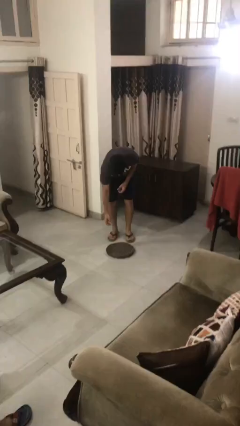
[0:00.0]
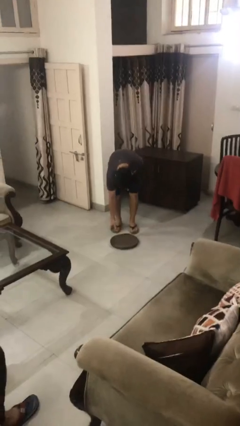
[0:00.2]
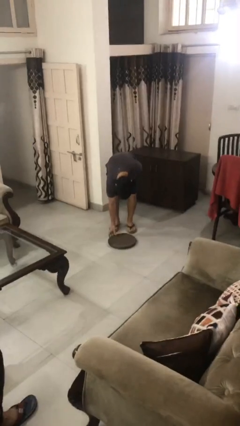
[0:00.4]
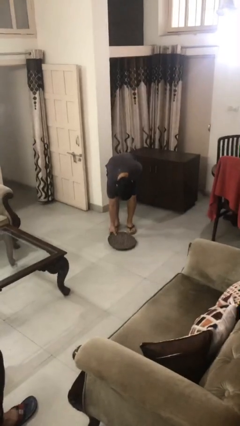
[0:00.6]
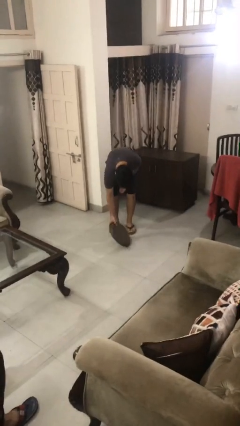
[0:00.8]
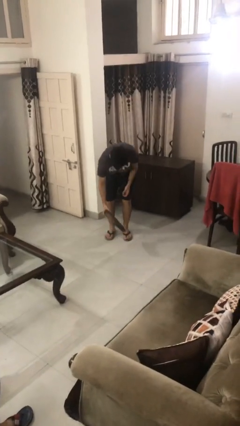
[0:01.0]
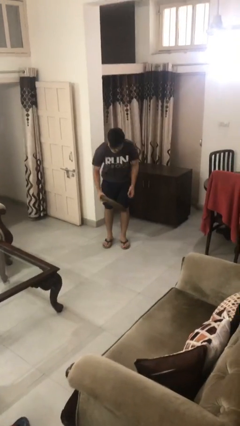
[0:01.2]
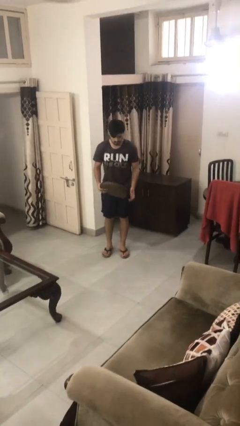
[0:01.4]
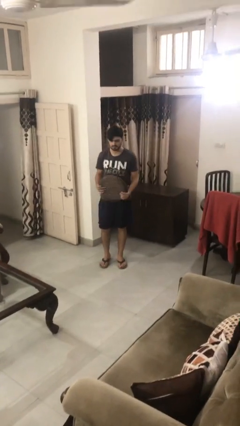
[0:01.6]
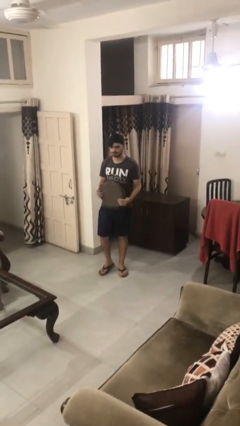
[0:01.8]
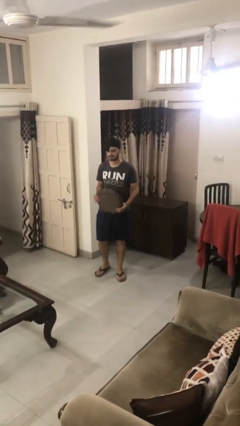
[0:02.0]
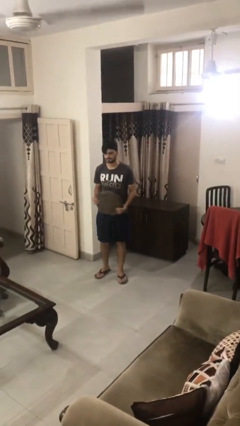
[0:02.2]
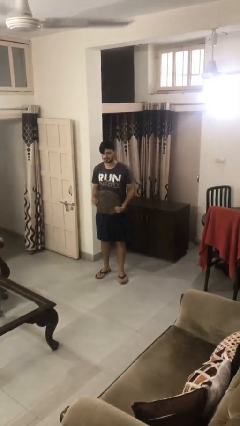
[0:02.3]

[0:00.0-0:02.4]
person picks up object from floor

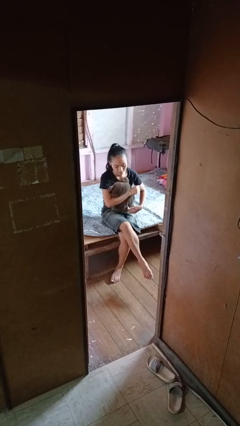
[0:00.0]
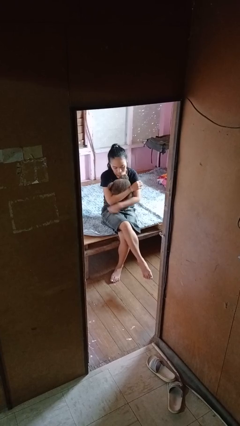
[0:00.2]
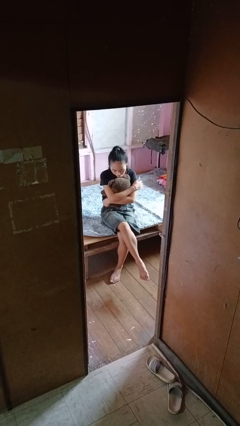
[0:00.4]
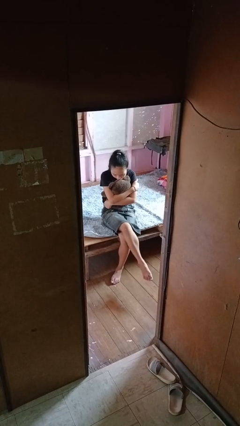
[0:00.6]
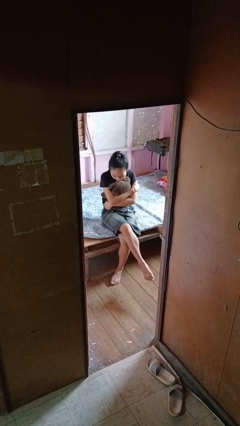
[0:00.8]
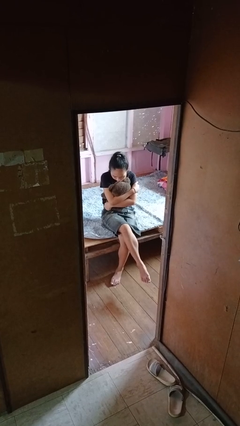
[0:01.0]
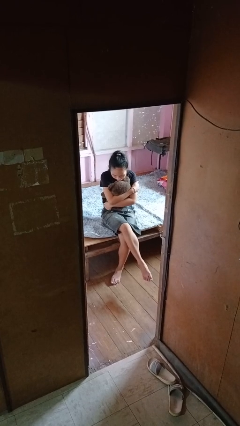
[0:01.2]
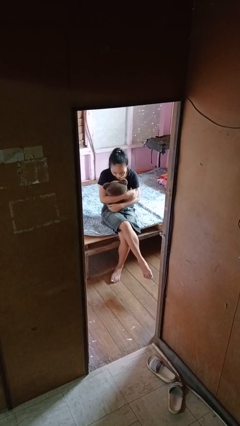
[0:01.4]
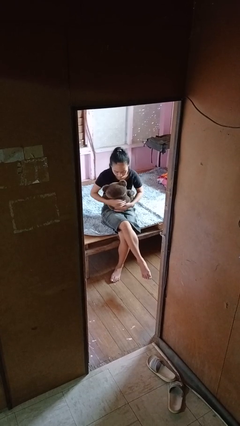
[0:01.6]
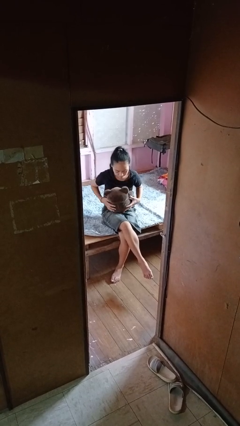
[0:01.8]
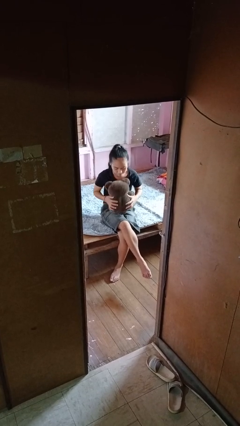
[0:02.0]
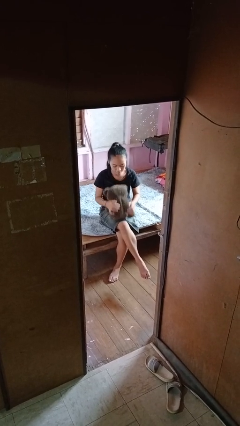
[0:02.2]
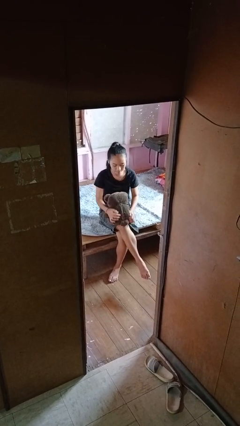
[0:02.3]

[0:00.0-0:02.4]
person hugs stuffed animal

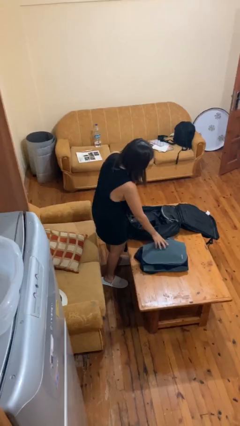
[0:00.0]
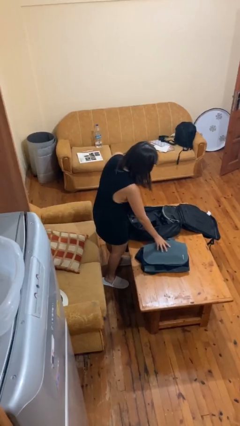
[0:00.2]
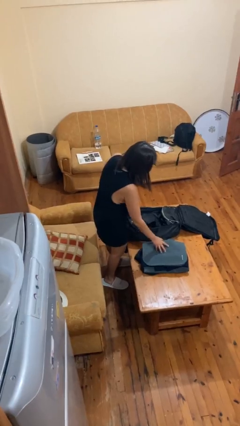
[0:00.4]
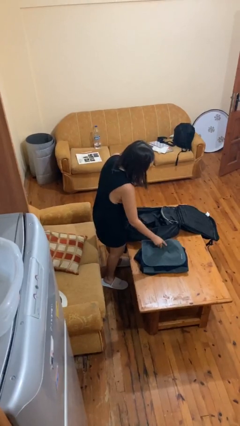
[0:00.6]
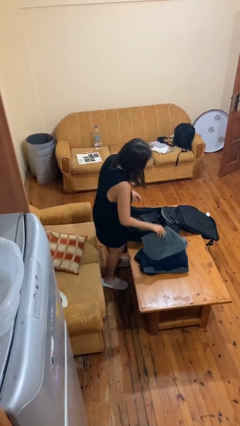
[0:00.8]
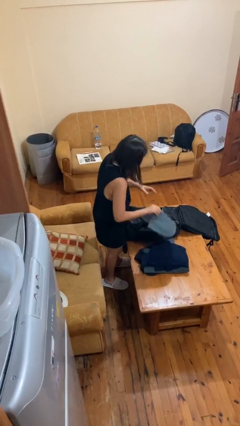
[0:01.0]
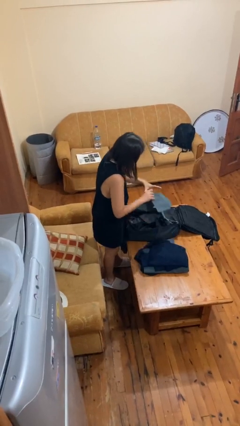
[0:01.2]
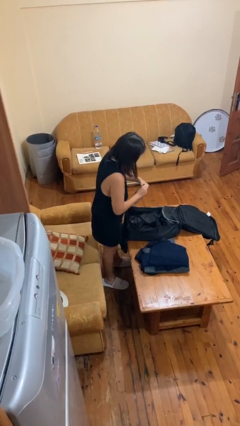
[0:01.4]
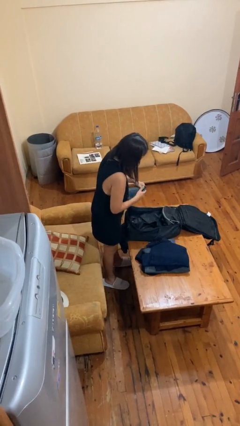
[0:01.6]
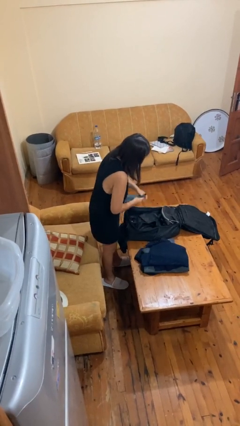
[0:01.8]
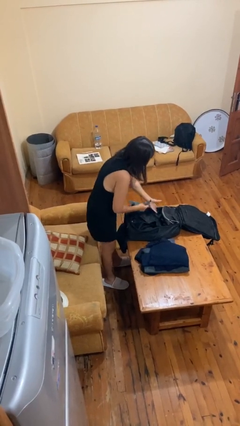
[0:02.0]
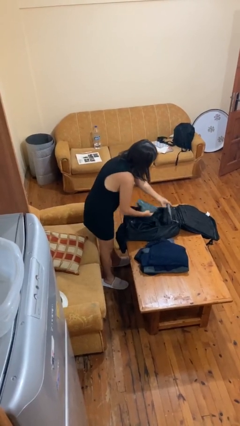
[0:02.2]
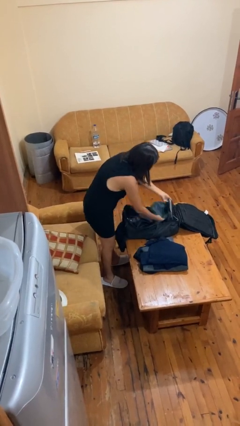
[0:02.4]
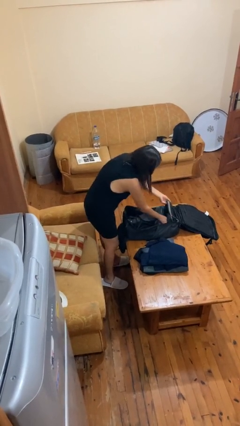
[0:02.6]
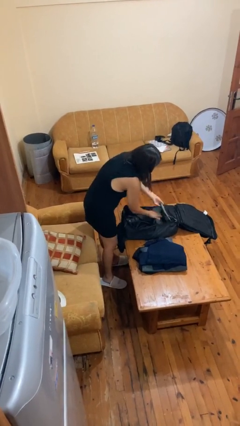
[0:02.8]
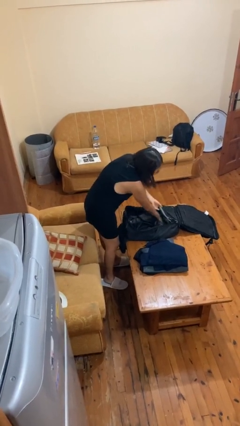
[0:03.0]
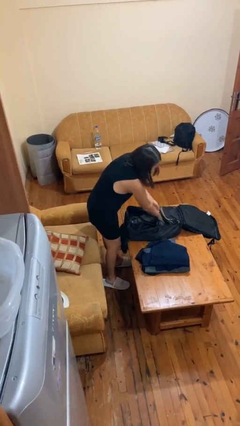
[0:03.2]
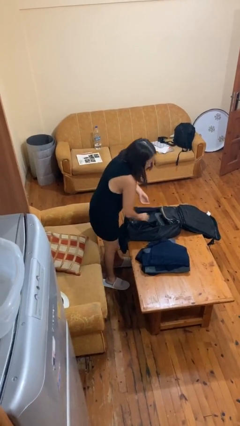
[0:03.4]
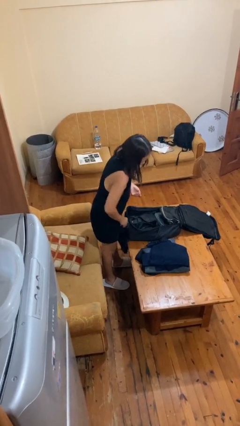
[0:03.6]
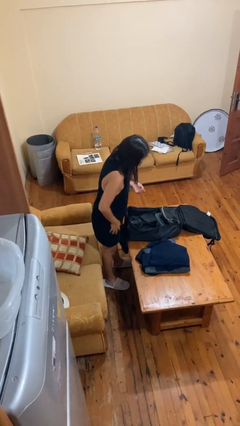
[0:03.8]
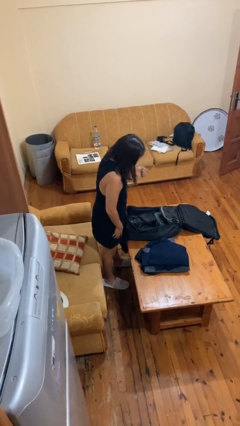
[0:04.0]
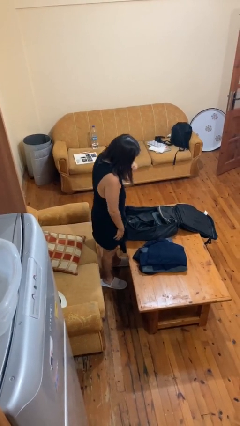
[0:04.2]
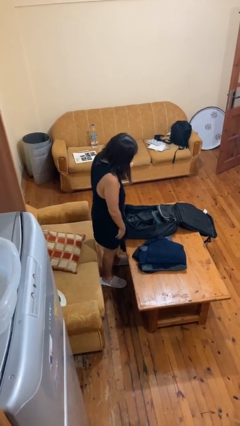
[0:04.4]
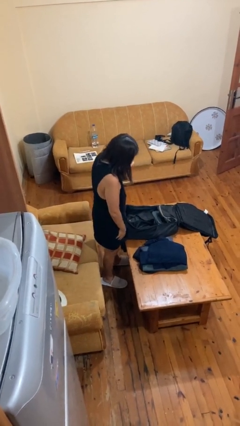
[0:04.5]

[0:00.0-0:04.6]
person loads clothes into suitcase

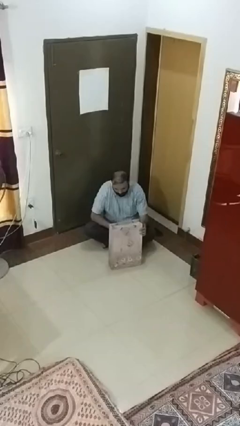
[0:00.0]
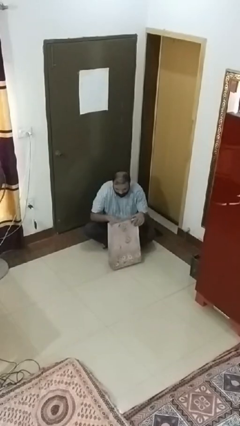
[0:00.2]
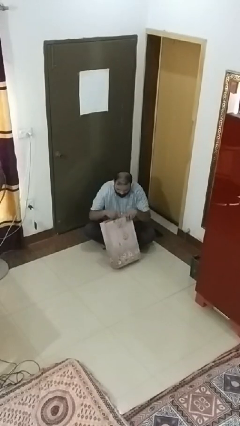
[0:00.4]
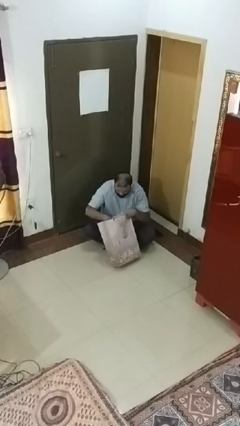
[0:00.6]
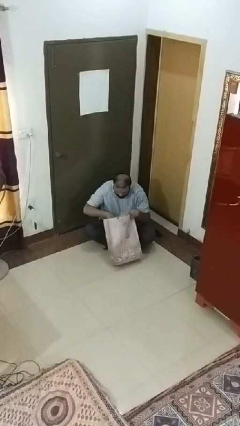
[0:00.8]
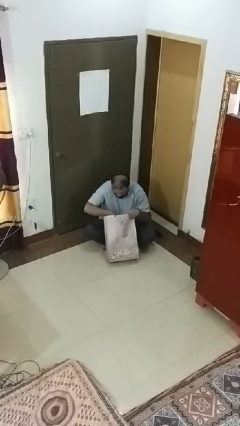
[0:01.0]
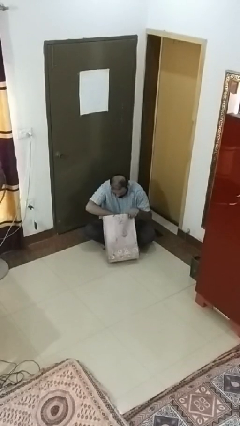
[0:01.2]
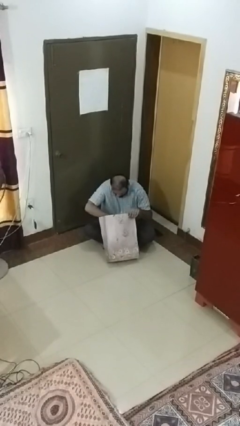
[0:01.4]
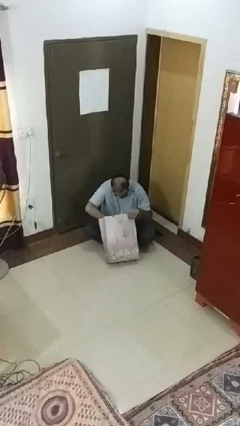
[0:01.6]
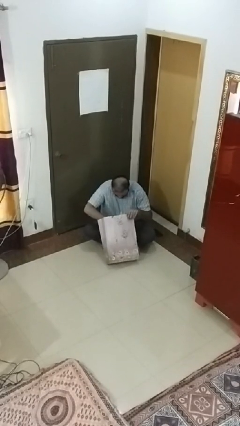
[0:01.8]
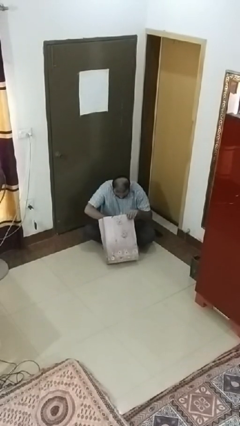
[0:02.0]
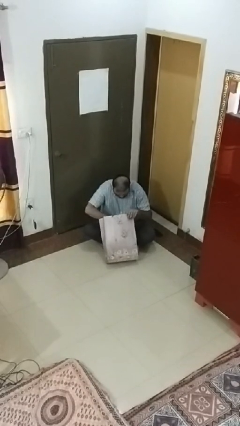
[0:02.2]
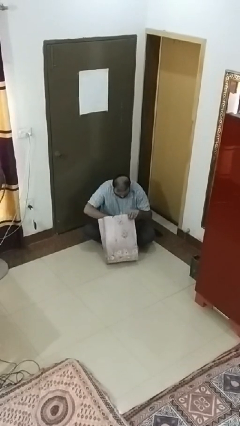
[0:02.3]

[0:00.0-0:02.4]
person searches under bed

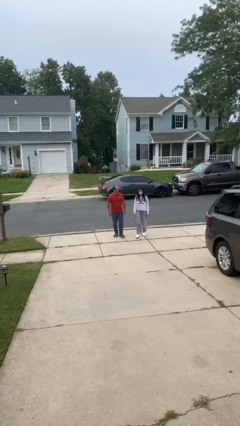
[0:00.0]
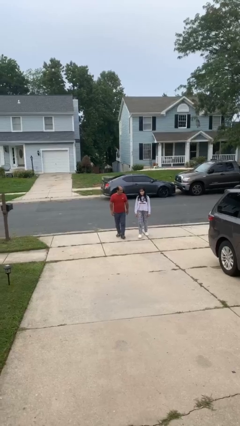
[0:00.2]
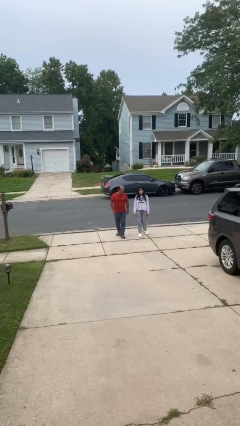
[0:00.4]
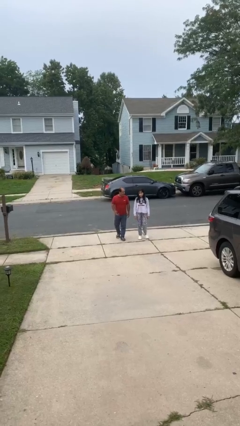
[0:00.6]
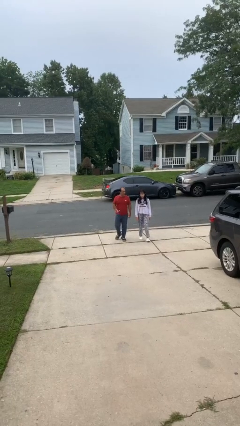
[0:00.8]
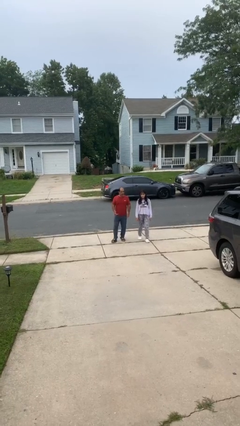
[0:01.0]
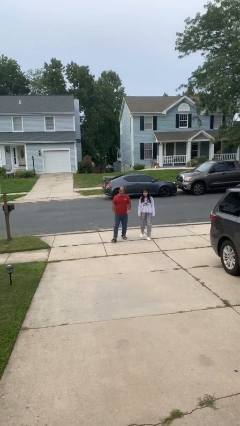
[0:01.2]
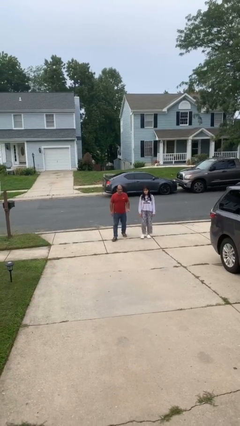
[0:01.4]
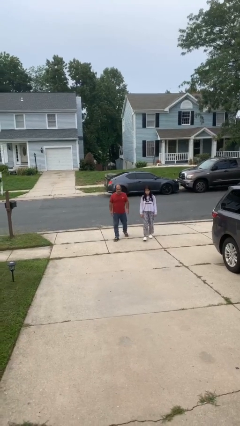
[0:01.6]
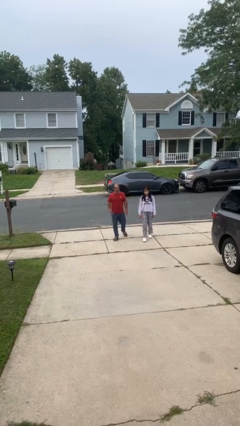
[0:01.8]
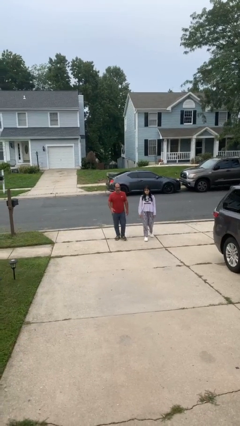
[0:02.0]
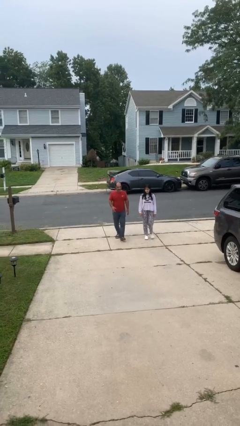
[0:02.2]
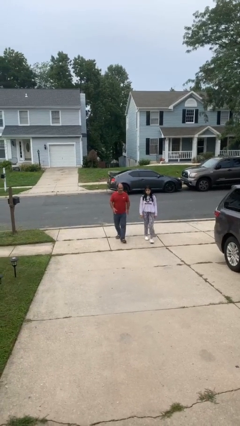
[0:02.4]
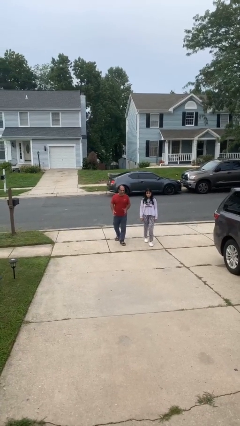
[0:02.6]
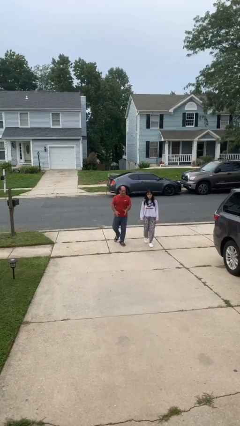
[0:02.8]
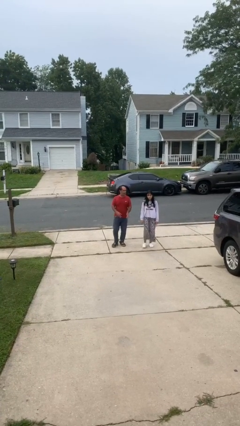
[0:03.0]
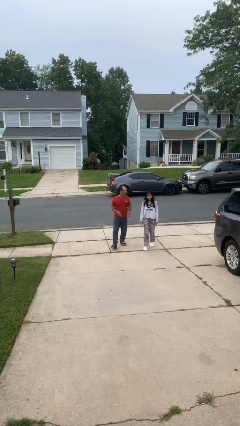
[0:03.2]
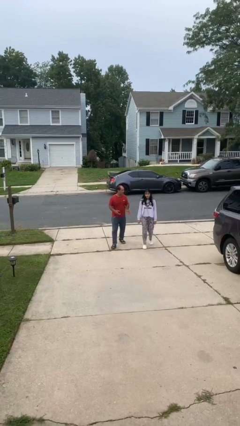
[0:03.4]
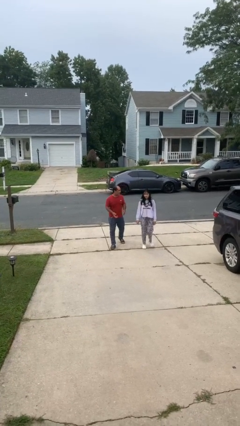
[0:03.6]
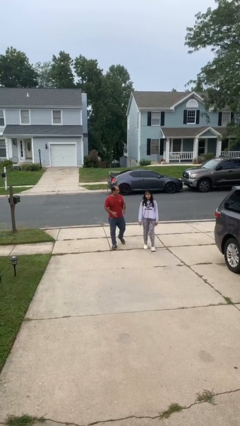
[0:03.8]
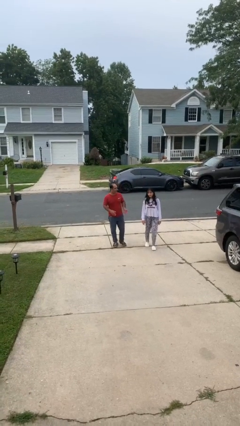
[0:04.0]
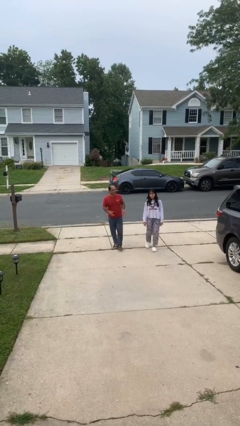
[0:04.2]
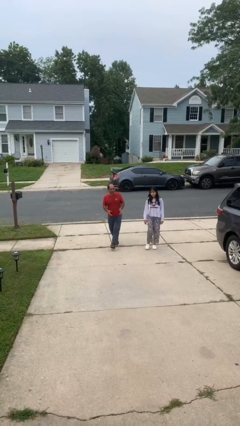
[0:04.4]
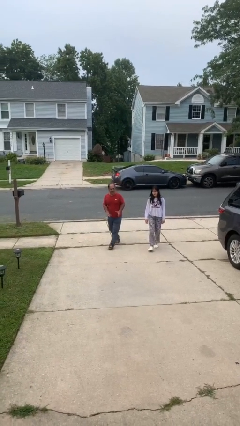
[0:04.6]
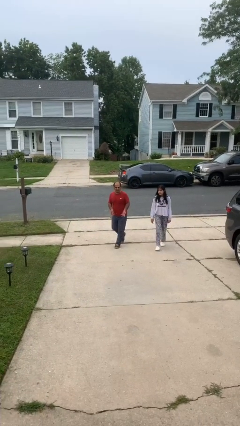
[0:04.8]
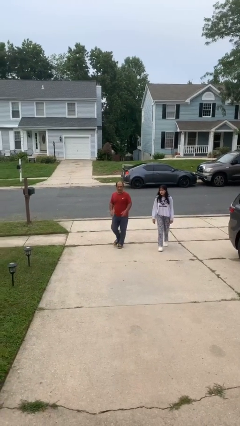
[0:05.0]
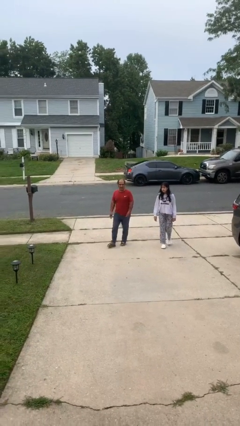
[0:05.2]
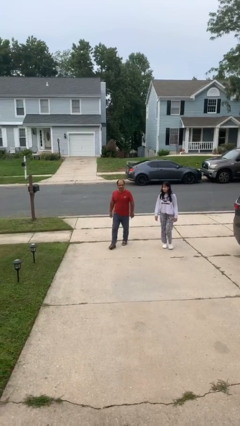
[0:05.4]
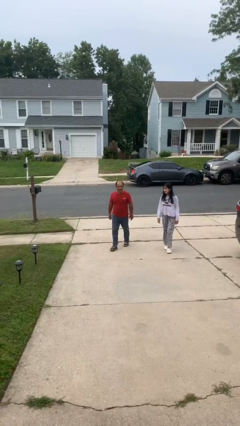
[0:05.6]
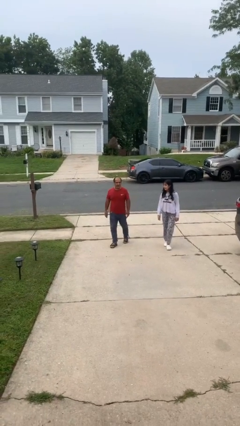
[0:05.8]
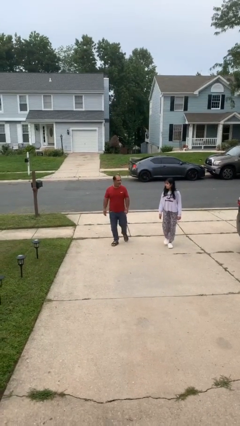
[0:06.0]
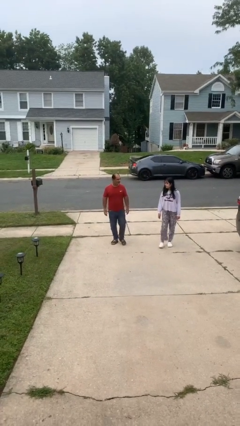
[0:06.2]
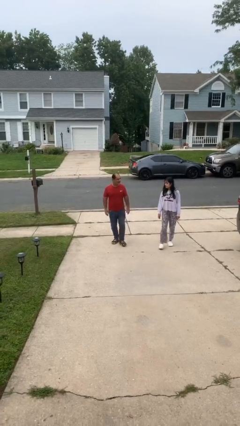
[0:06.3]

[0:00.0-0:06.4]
person talks to person
